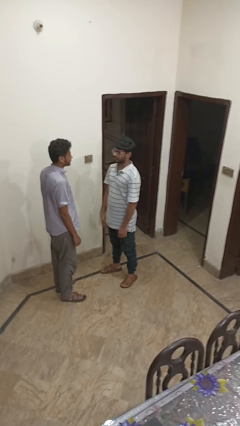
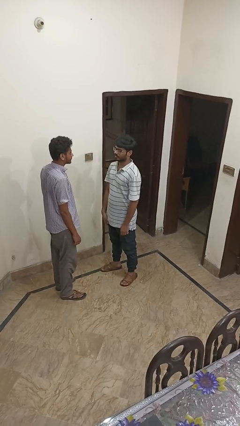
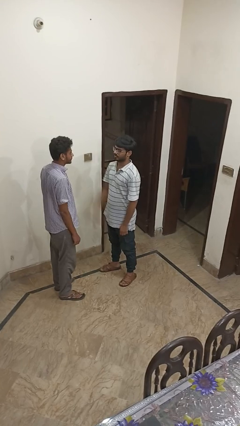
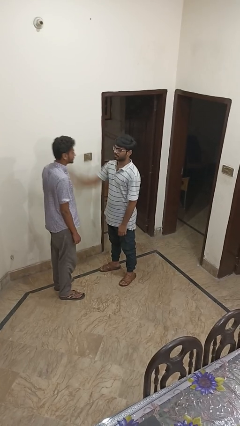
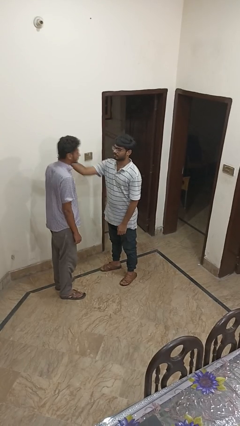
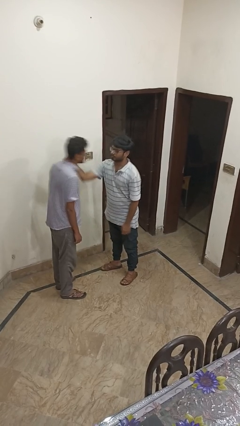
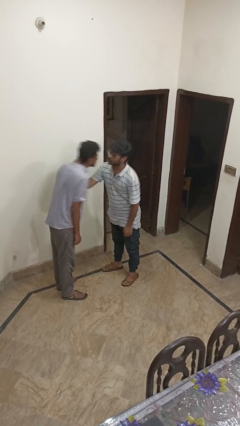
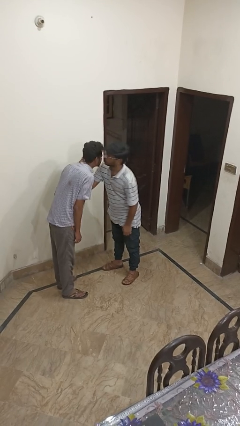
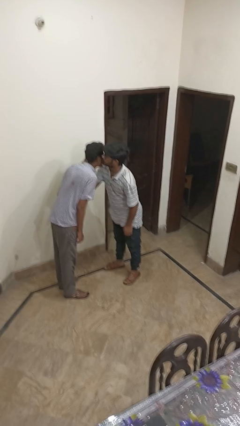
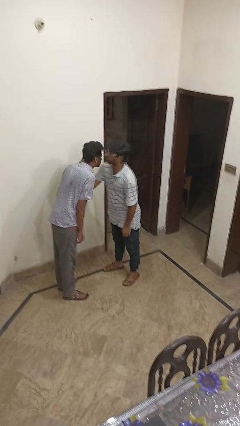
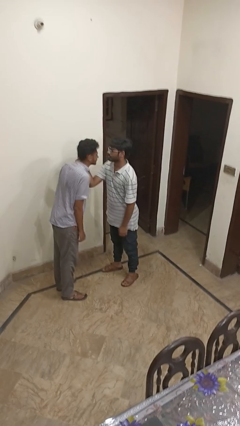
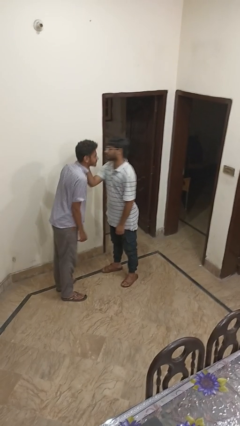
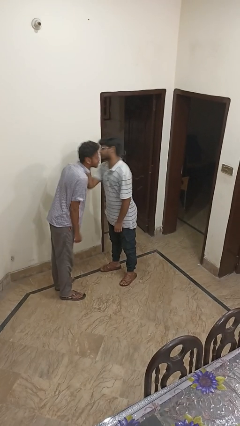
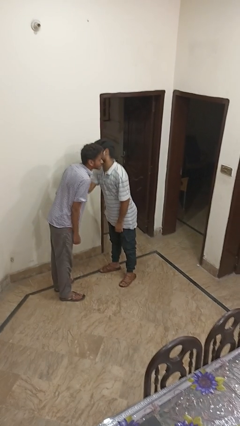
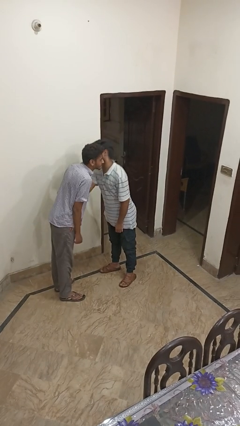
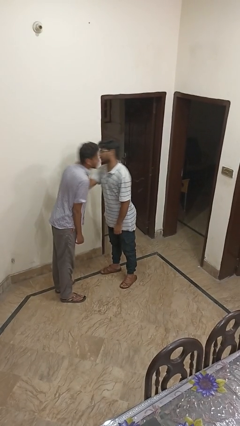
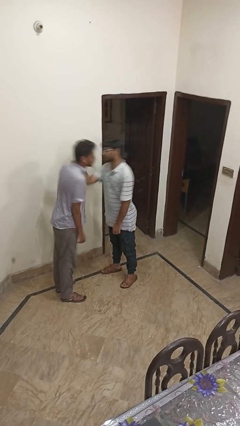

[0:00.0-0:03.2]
person kisses cheek of person

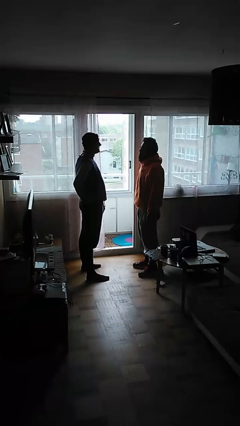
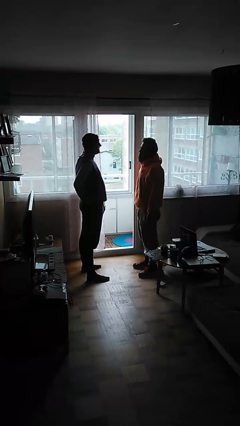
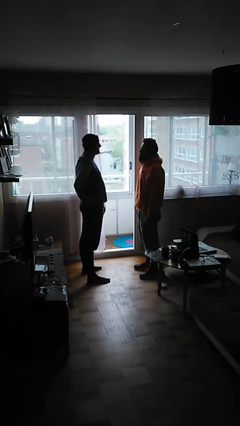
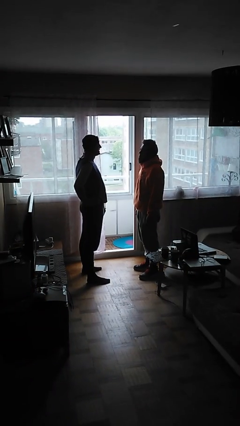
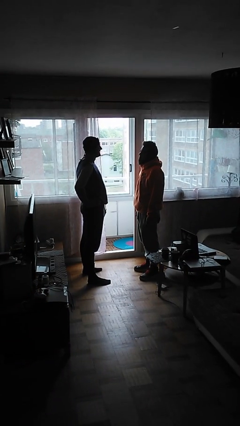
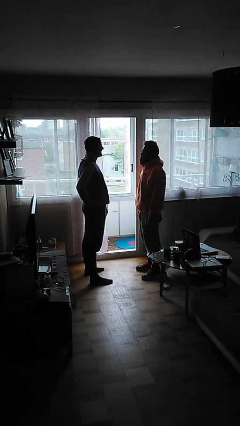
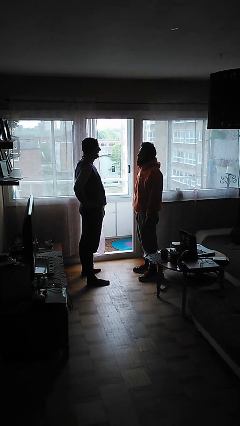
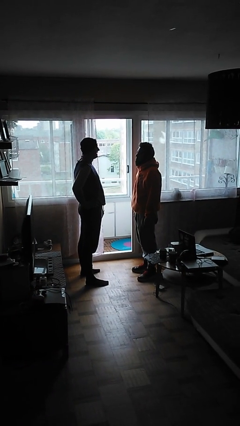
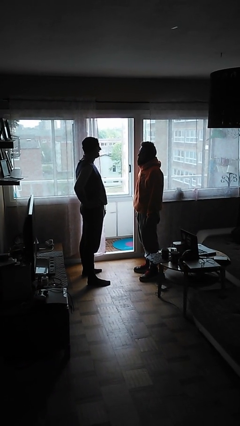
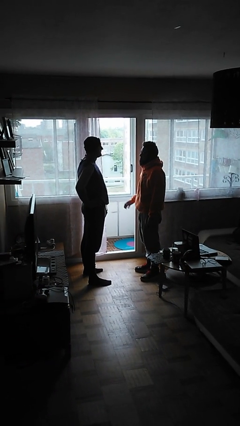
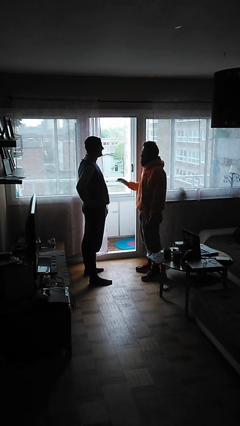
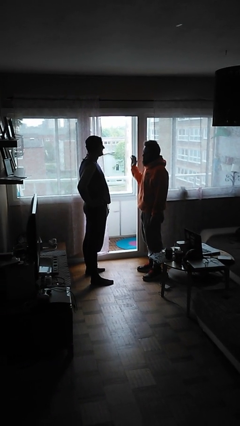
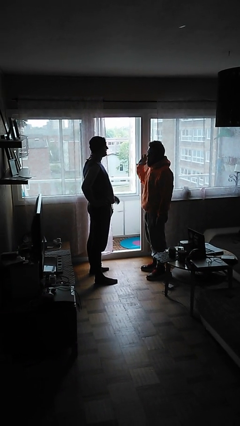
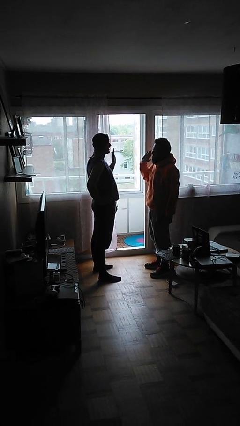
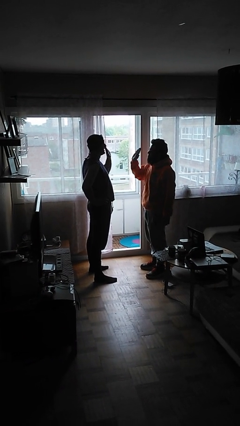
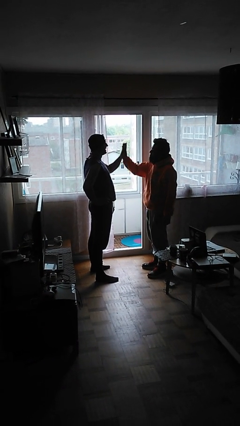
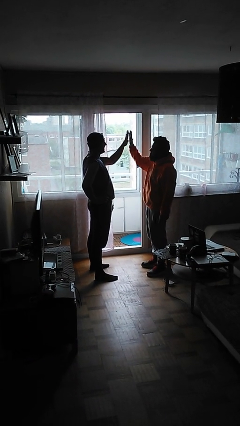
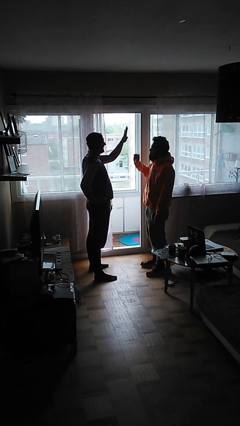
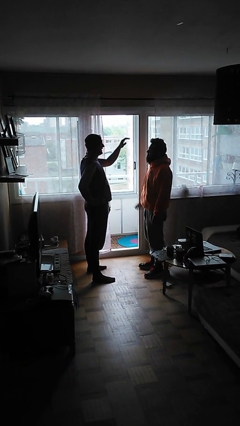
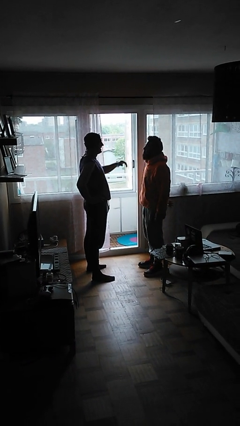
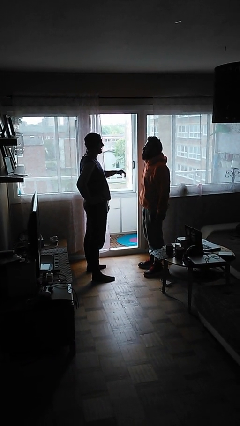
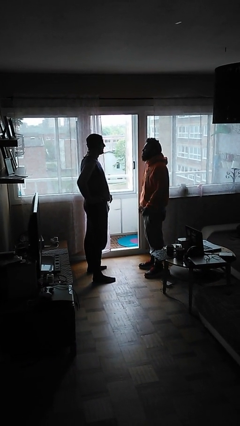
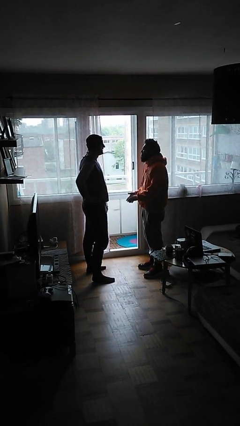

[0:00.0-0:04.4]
person highfives hand

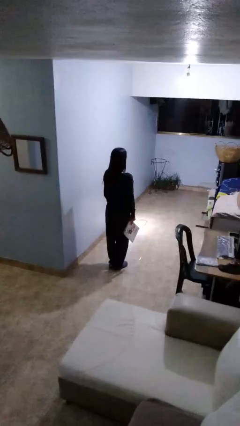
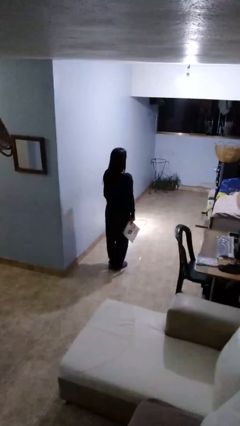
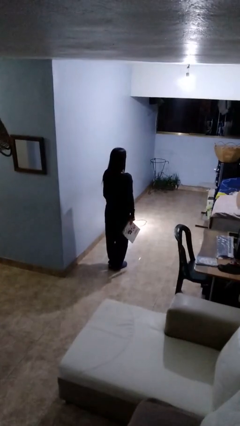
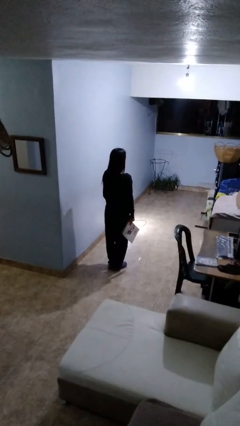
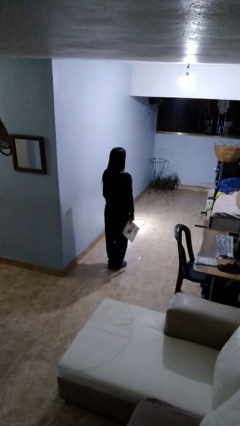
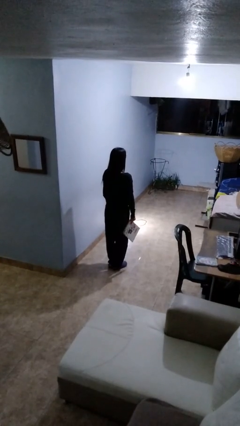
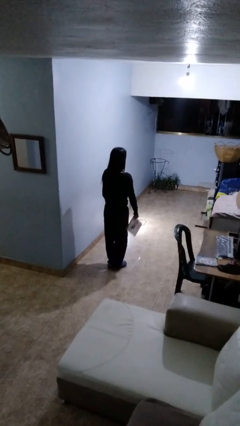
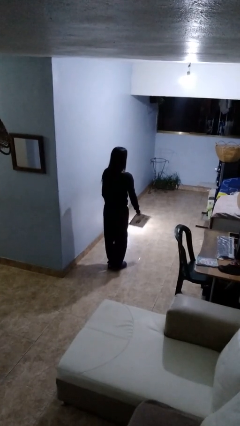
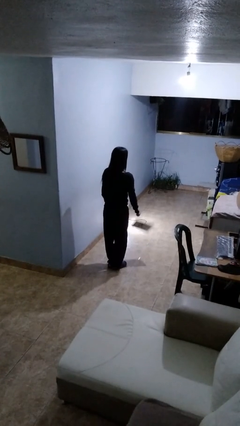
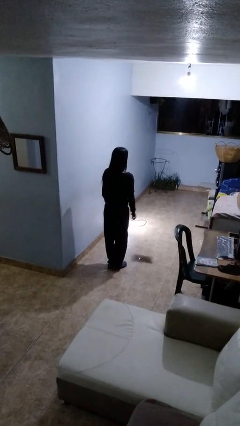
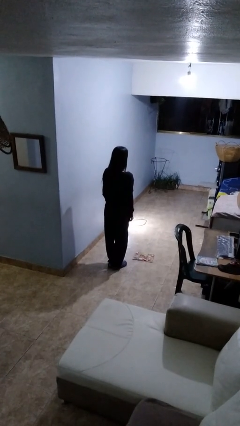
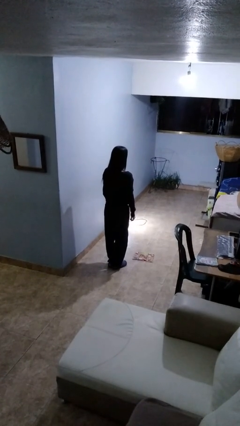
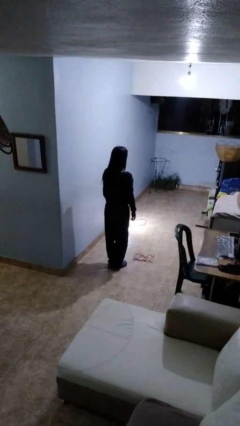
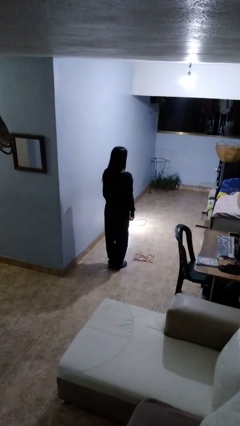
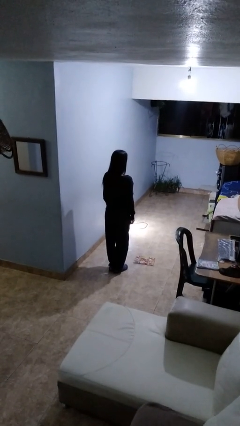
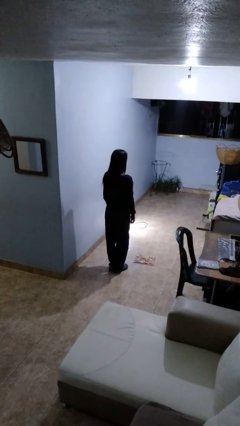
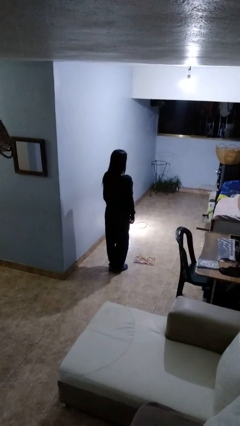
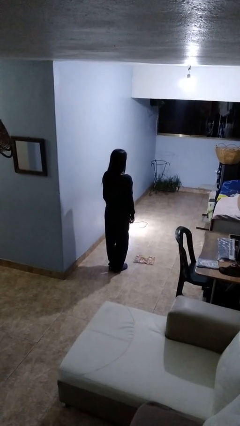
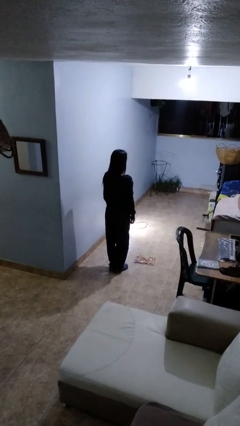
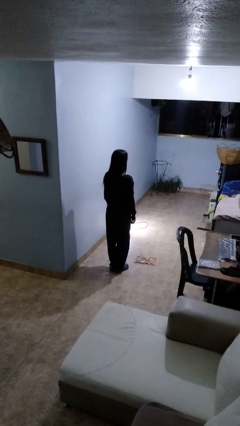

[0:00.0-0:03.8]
person throws object to ground

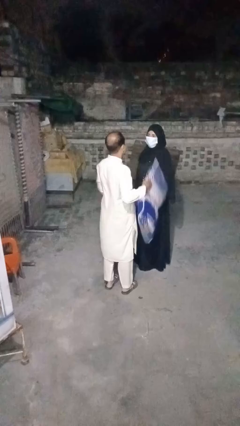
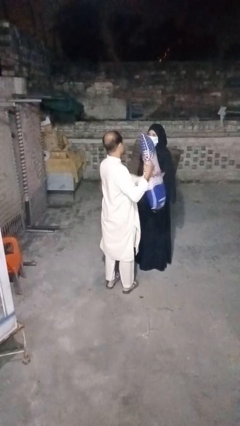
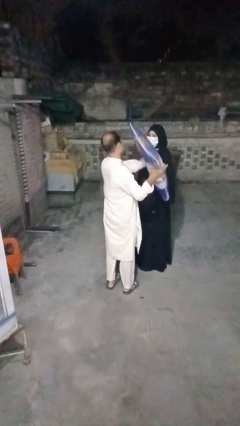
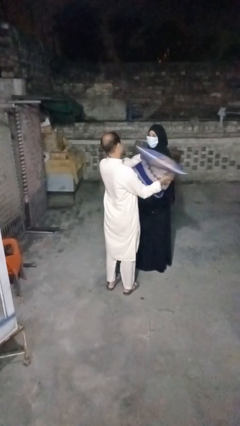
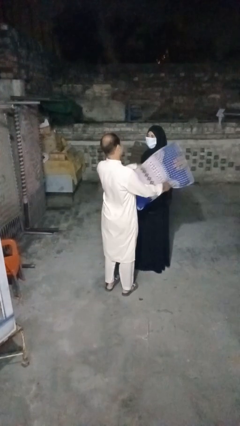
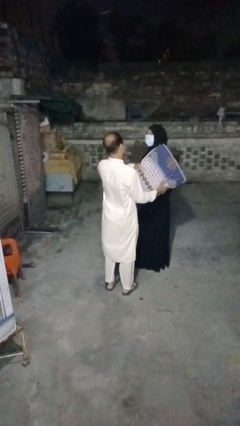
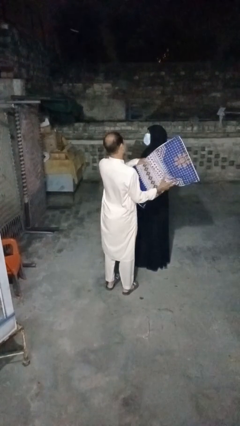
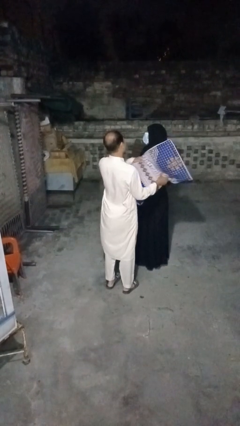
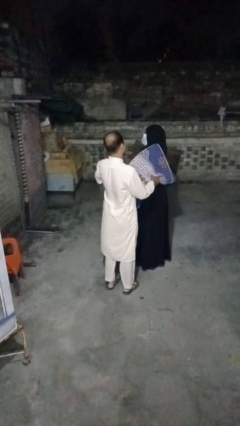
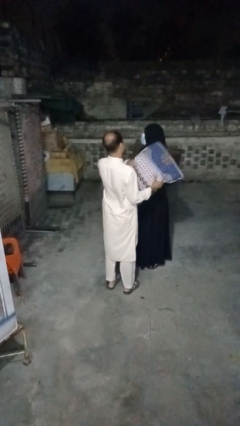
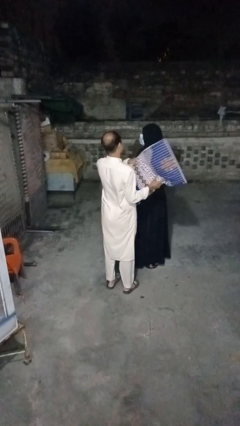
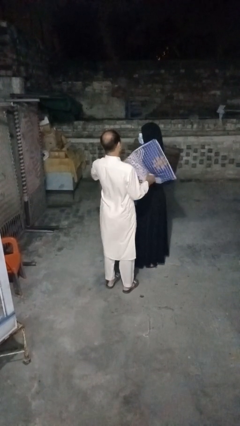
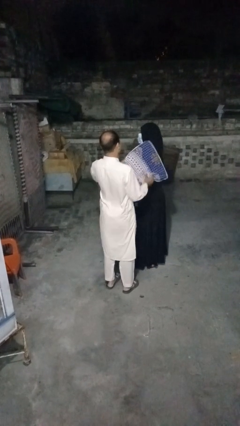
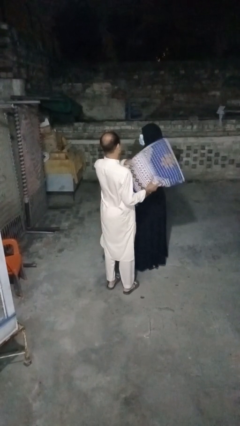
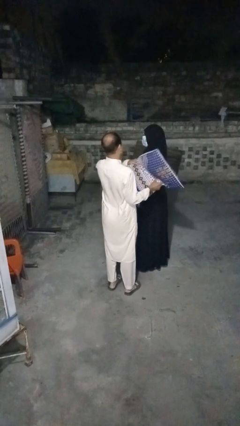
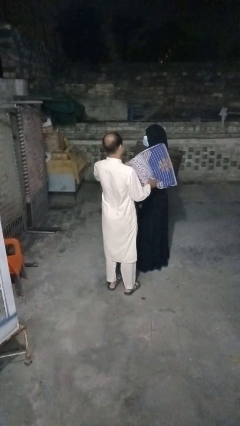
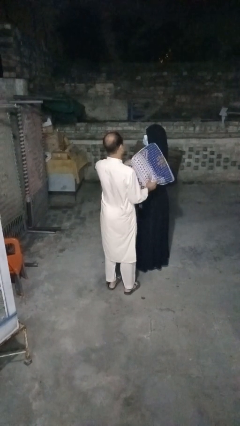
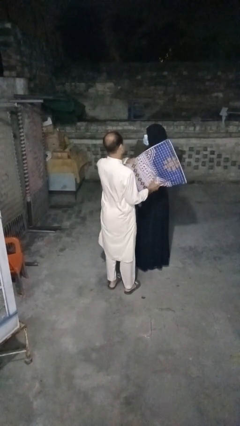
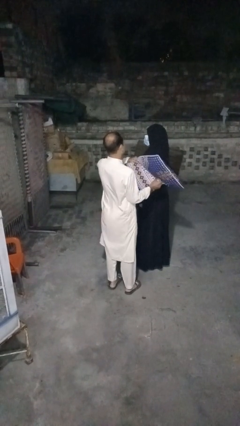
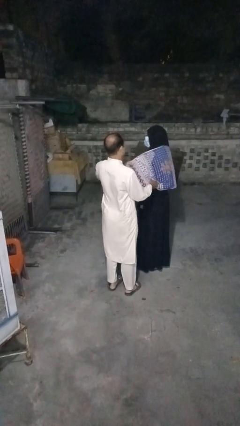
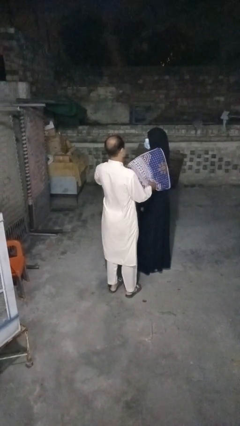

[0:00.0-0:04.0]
person hits person with pillow

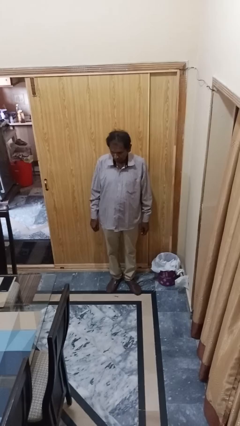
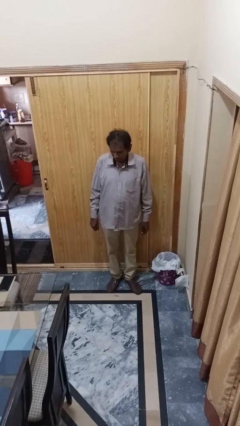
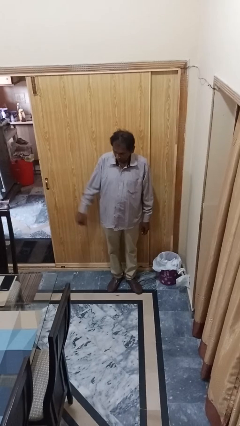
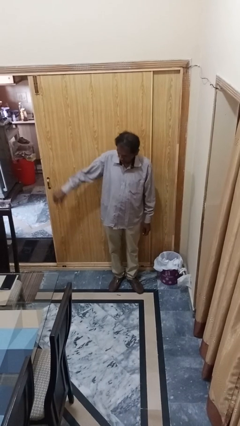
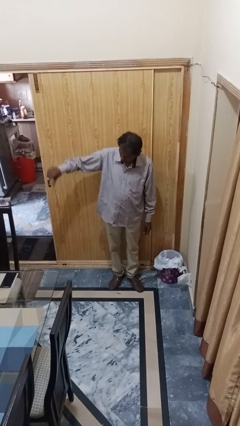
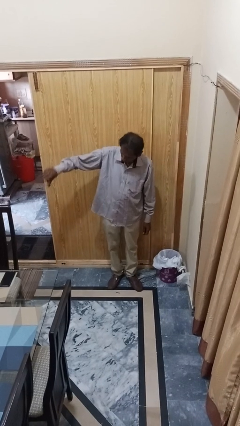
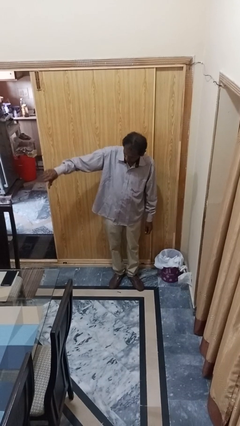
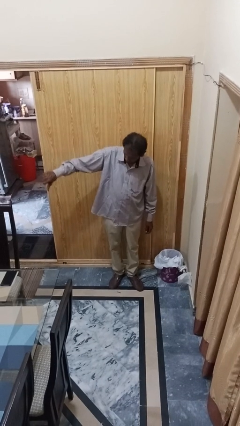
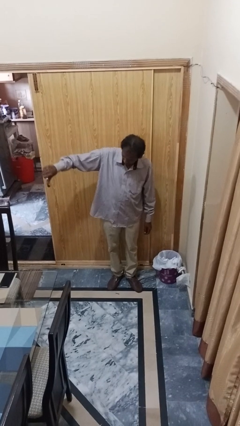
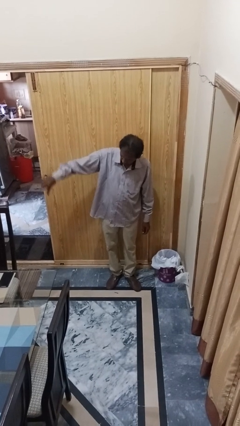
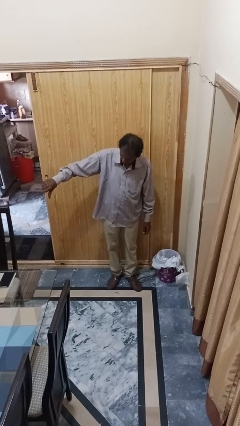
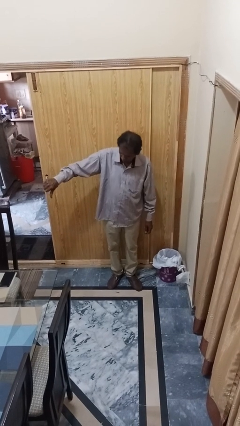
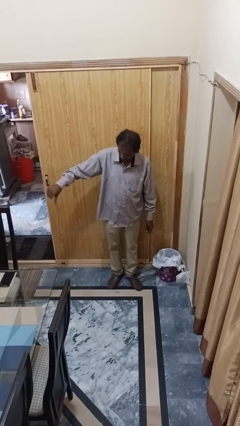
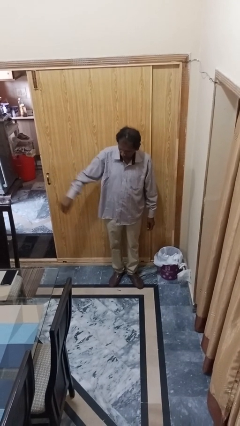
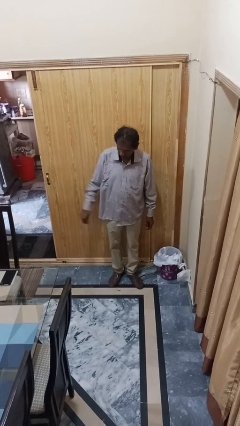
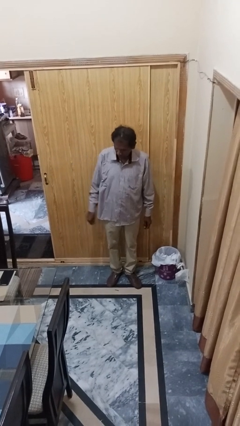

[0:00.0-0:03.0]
person gestures thumbs down
